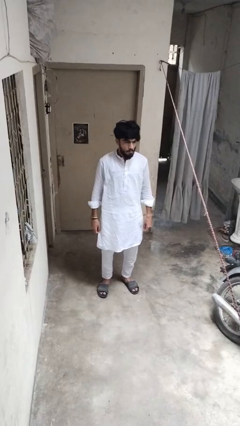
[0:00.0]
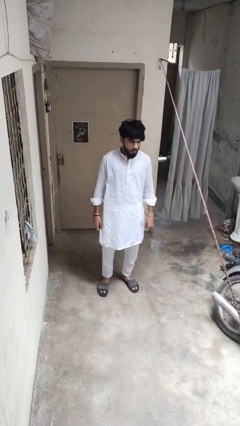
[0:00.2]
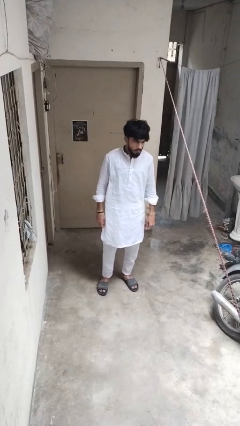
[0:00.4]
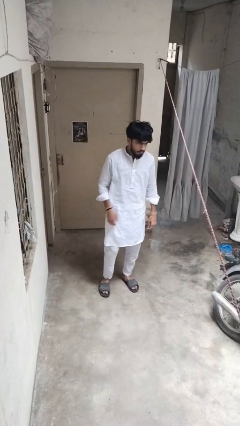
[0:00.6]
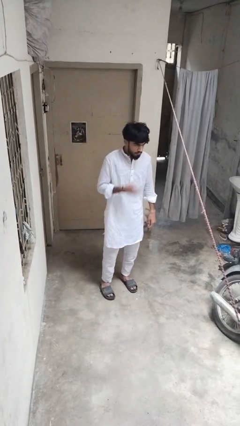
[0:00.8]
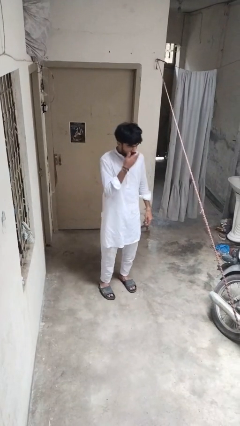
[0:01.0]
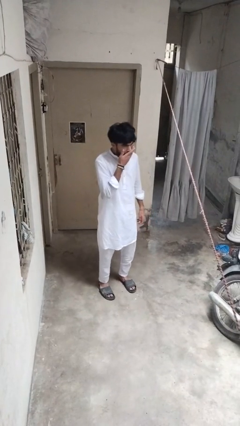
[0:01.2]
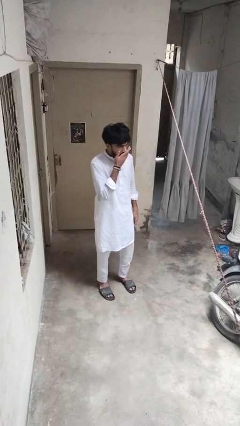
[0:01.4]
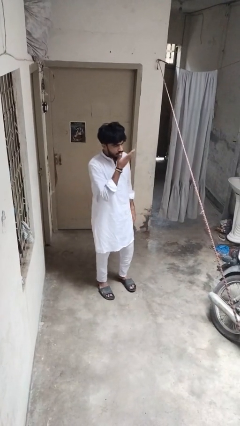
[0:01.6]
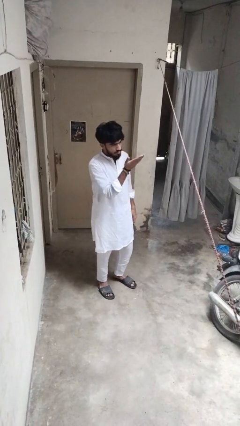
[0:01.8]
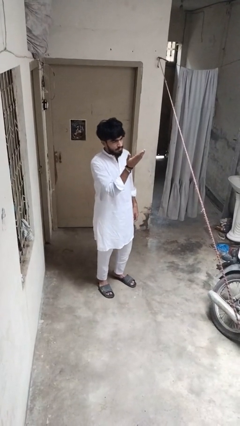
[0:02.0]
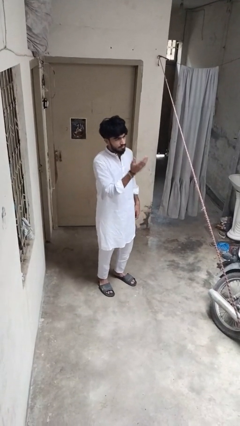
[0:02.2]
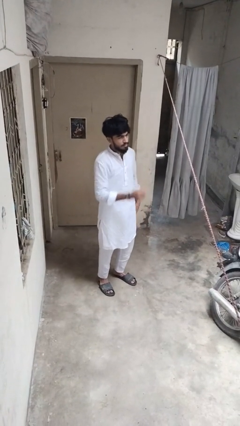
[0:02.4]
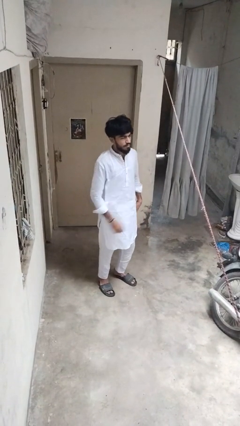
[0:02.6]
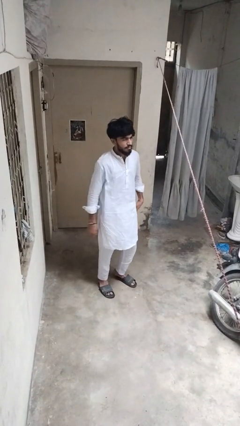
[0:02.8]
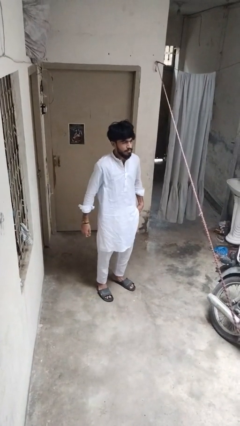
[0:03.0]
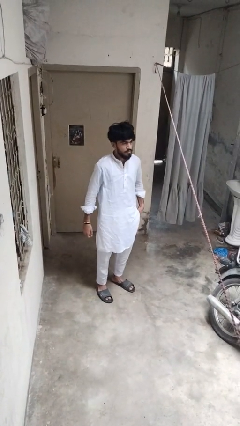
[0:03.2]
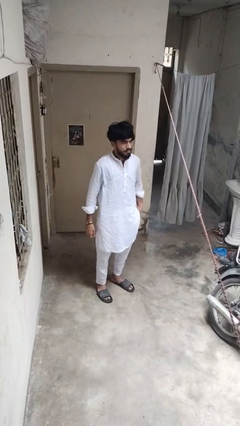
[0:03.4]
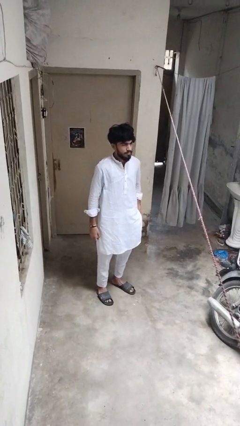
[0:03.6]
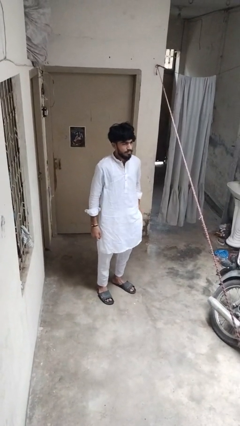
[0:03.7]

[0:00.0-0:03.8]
person gestures blow kiss

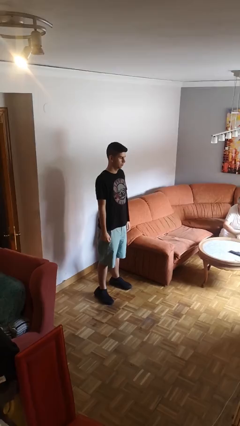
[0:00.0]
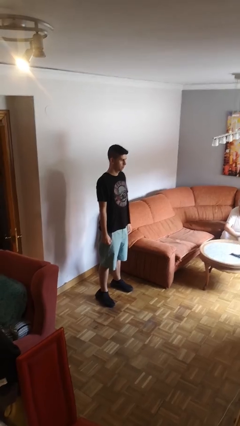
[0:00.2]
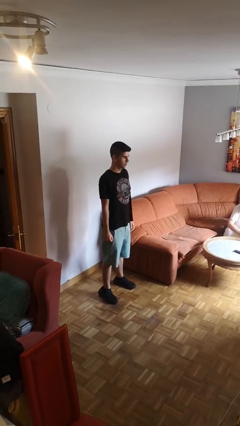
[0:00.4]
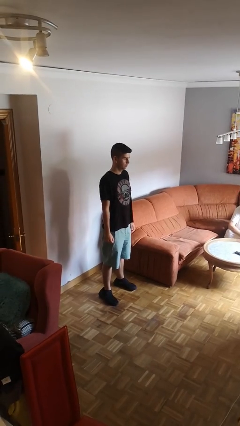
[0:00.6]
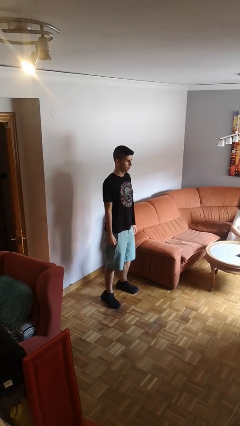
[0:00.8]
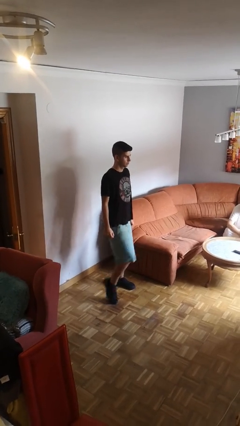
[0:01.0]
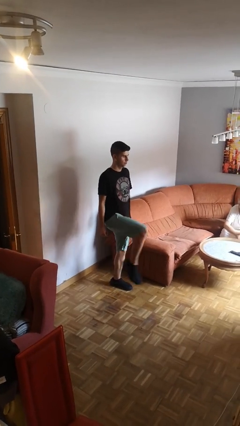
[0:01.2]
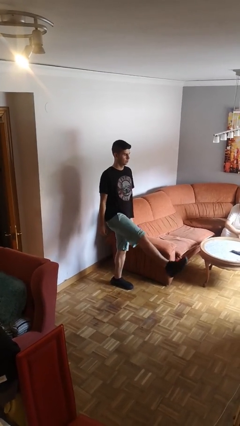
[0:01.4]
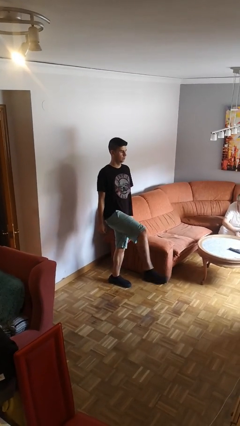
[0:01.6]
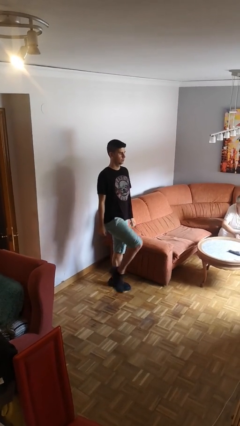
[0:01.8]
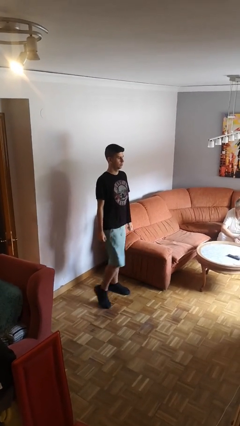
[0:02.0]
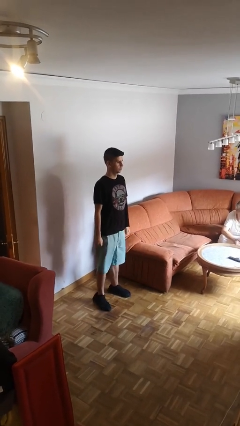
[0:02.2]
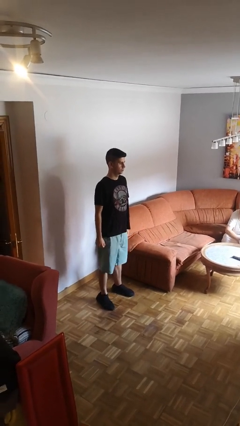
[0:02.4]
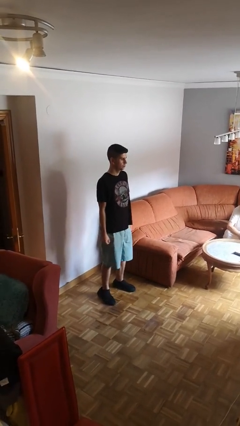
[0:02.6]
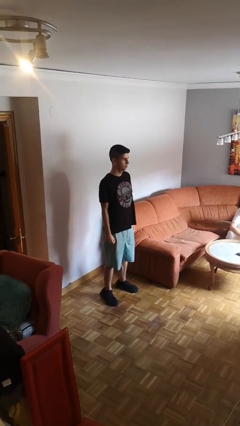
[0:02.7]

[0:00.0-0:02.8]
person karate kicks

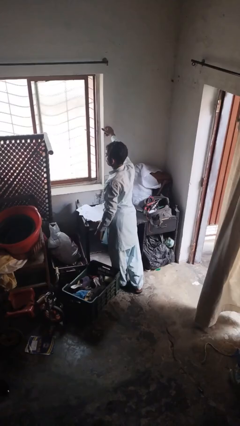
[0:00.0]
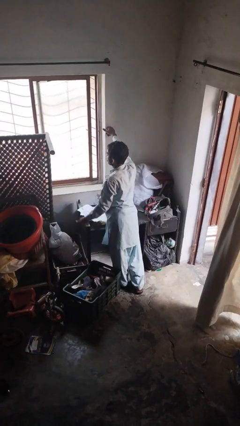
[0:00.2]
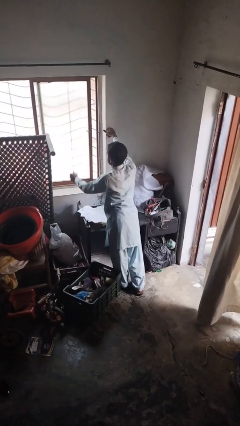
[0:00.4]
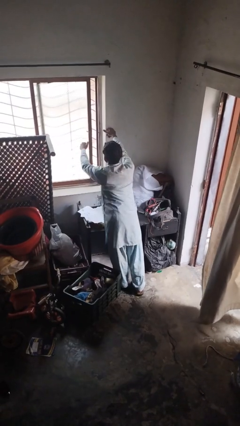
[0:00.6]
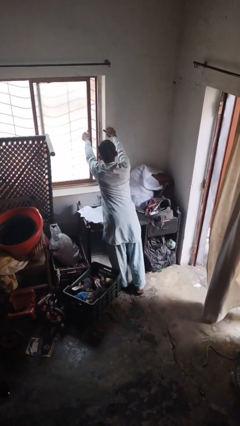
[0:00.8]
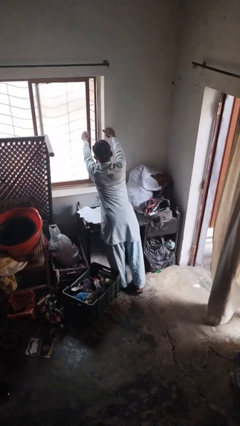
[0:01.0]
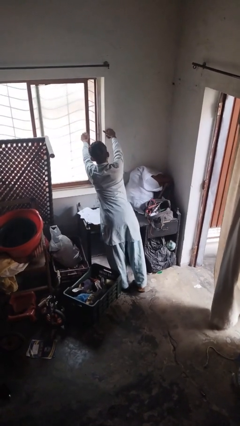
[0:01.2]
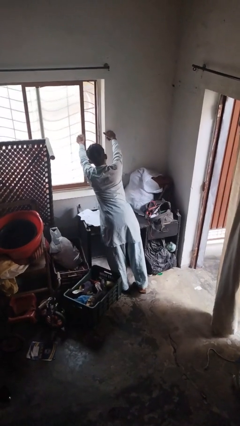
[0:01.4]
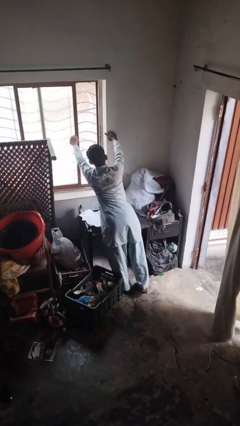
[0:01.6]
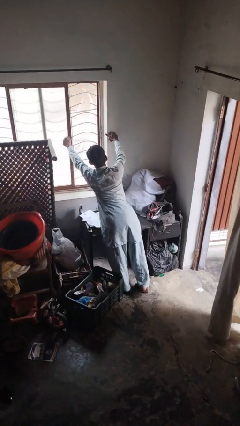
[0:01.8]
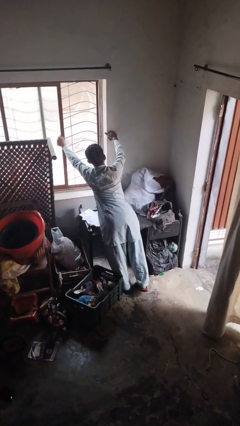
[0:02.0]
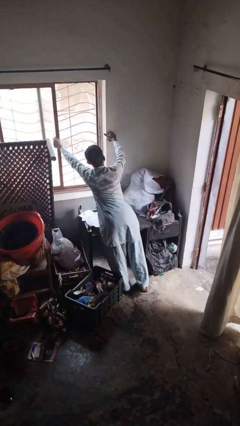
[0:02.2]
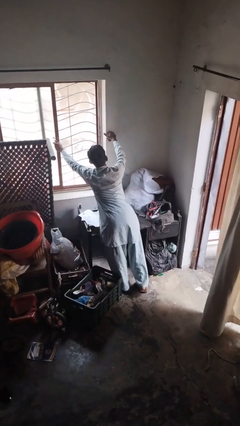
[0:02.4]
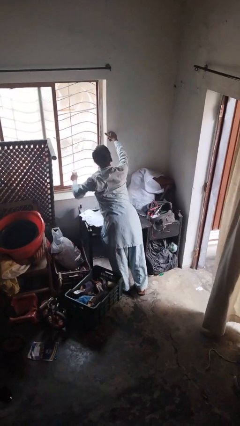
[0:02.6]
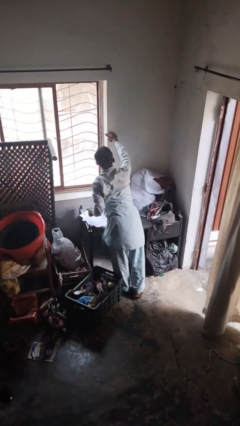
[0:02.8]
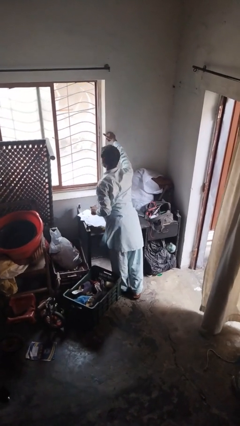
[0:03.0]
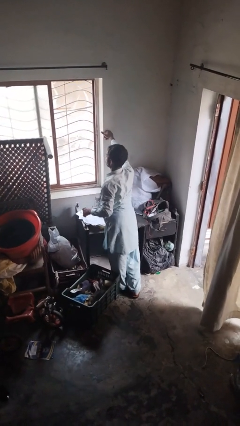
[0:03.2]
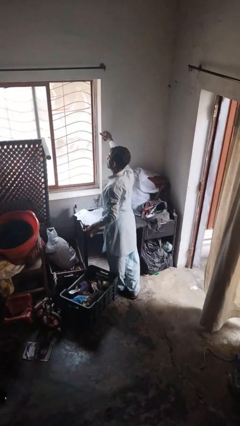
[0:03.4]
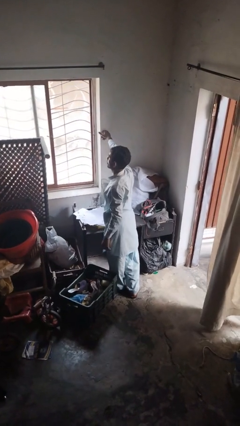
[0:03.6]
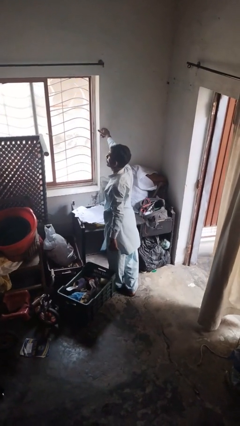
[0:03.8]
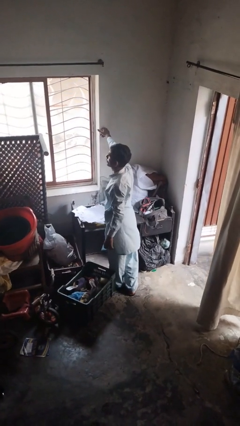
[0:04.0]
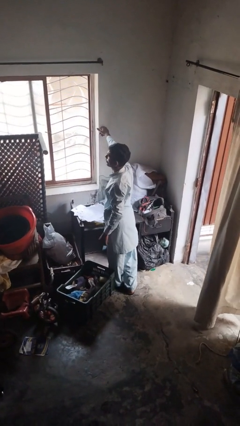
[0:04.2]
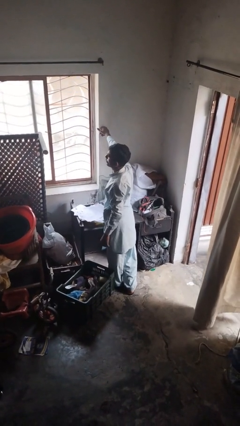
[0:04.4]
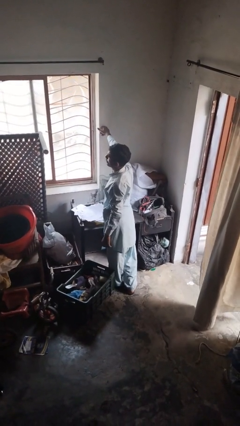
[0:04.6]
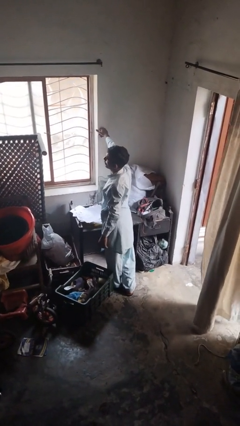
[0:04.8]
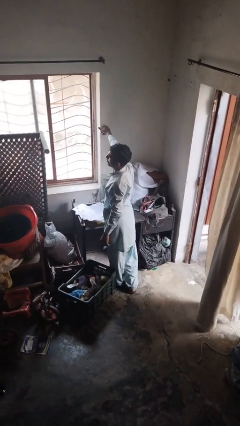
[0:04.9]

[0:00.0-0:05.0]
person opens home window

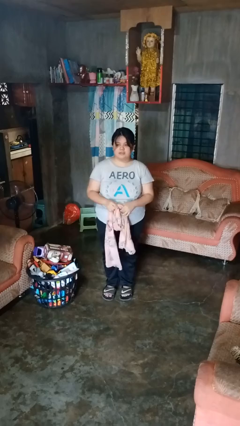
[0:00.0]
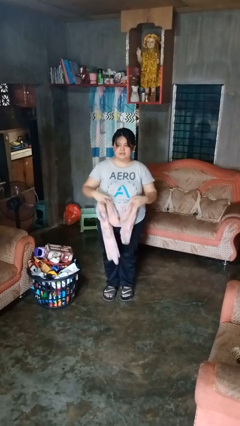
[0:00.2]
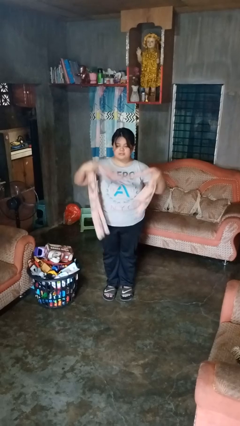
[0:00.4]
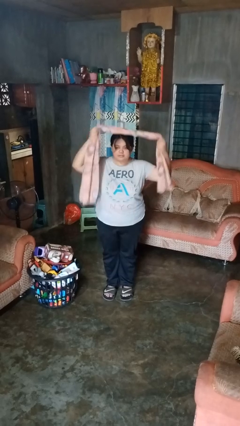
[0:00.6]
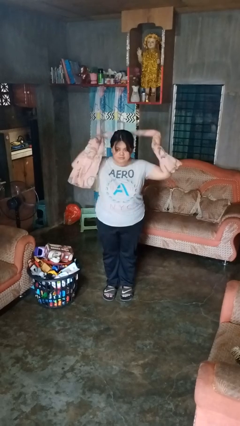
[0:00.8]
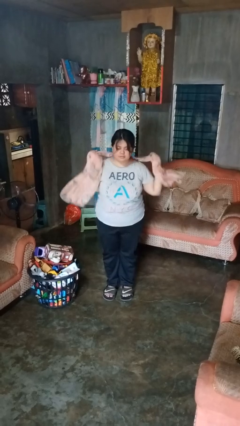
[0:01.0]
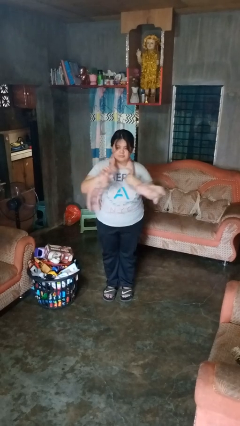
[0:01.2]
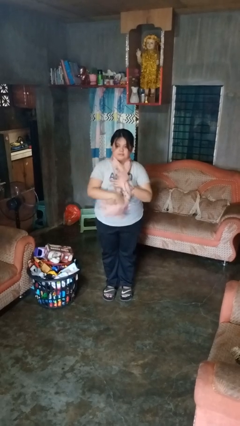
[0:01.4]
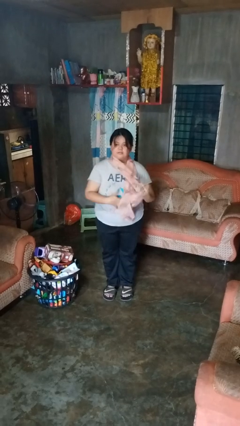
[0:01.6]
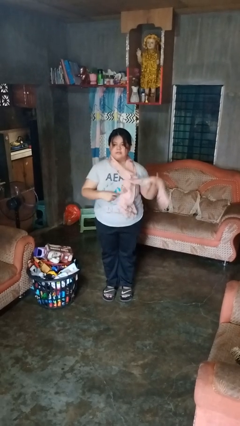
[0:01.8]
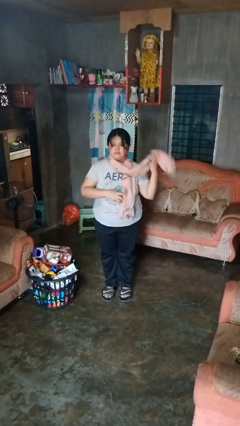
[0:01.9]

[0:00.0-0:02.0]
person puts on scarf

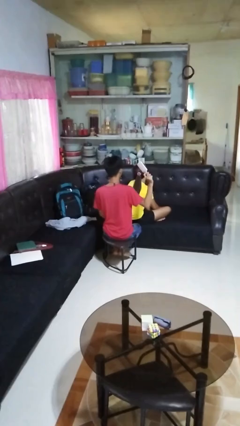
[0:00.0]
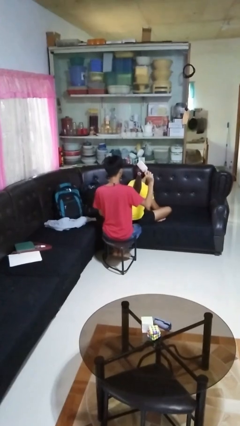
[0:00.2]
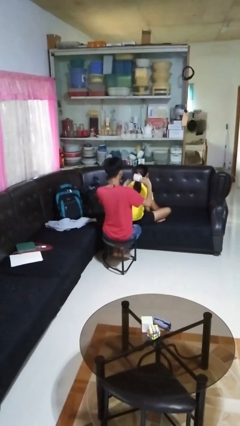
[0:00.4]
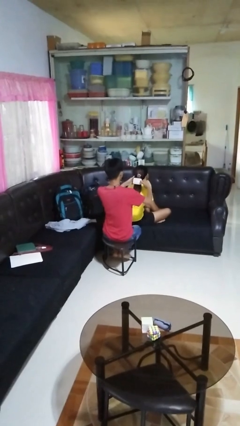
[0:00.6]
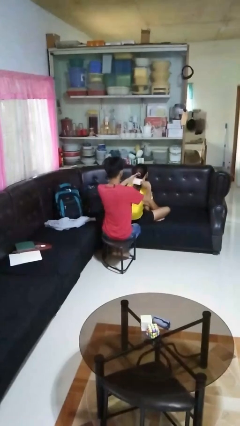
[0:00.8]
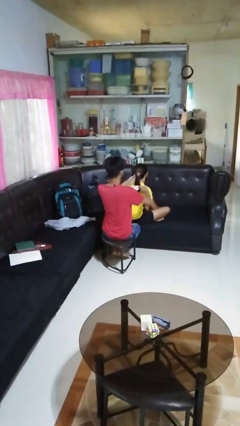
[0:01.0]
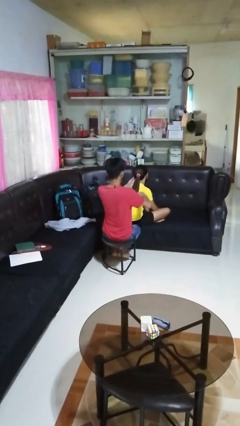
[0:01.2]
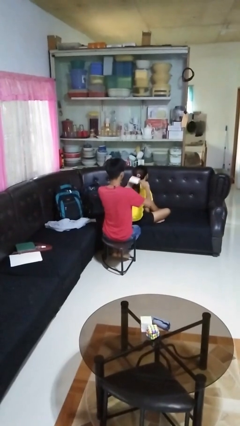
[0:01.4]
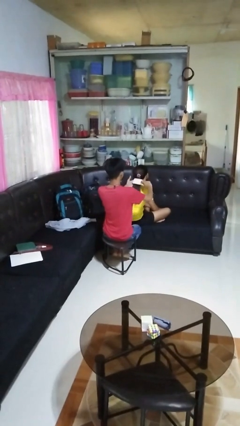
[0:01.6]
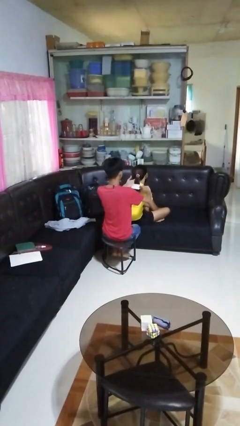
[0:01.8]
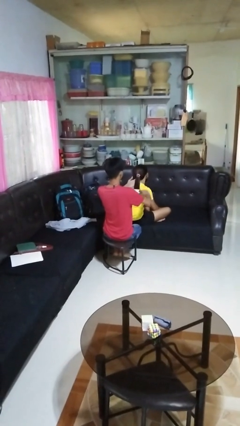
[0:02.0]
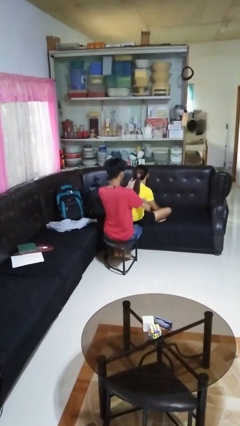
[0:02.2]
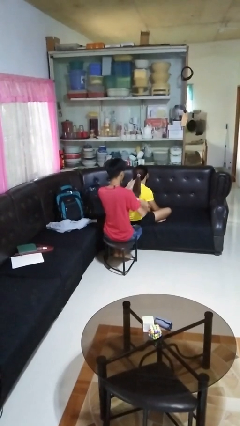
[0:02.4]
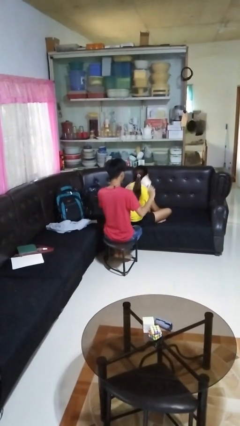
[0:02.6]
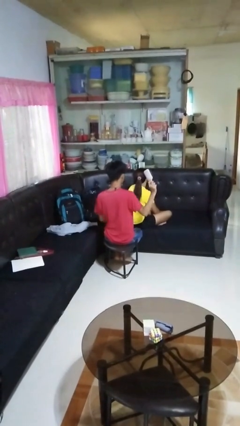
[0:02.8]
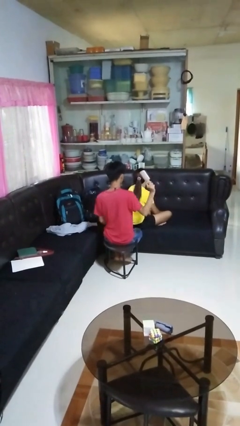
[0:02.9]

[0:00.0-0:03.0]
person brushes hair of person

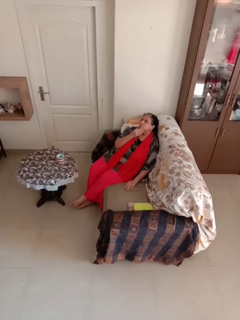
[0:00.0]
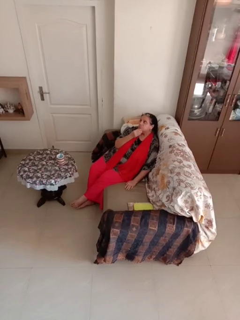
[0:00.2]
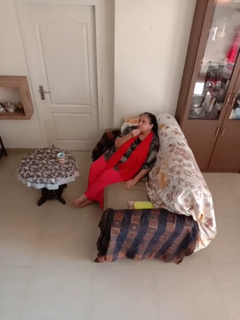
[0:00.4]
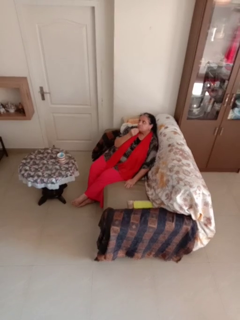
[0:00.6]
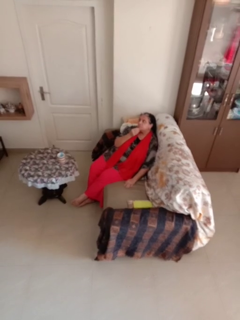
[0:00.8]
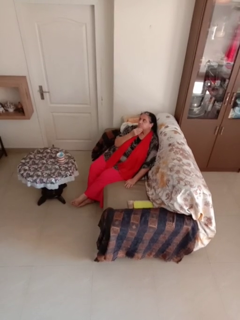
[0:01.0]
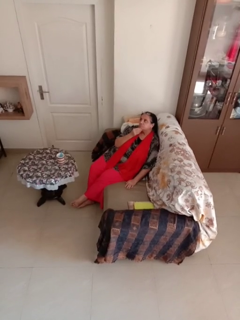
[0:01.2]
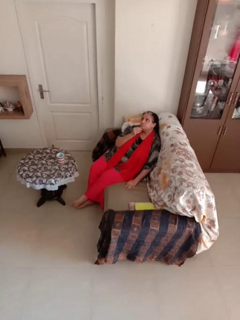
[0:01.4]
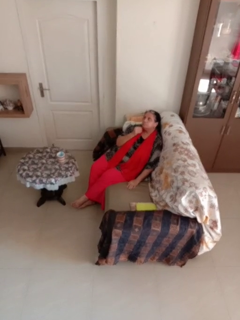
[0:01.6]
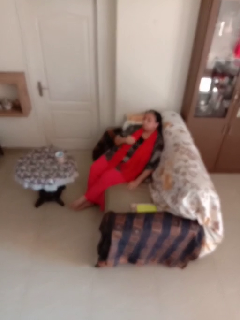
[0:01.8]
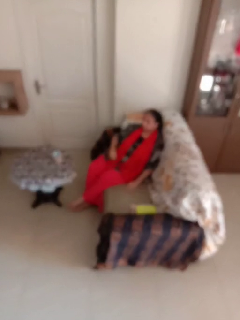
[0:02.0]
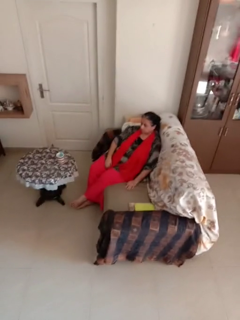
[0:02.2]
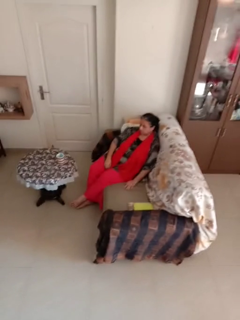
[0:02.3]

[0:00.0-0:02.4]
person strokes chin
